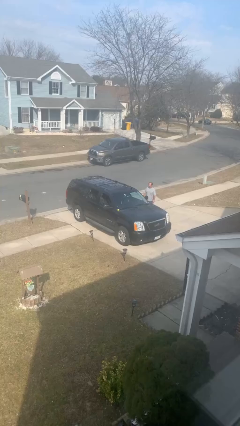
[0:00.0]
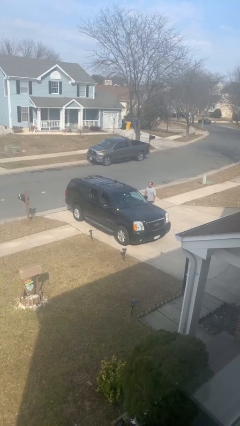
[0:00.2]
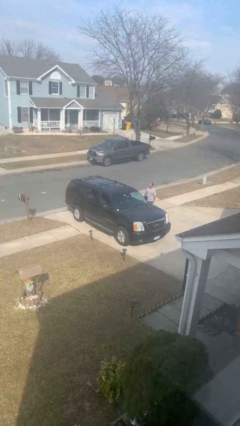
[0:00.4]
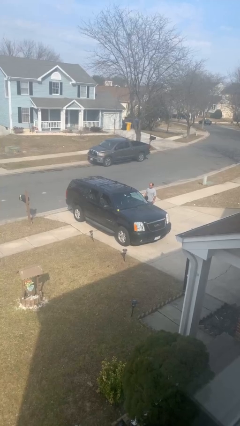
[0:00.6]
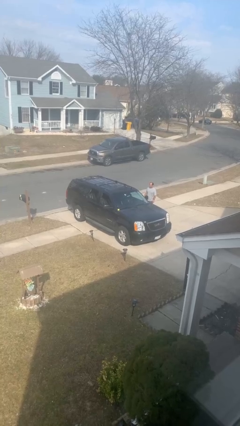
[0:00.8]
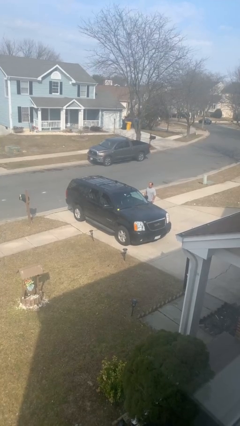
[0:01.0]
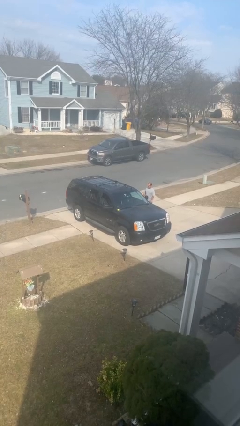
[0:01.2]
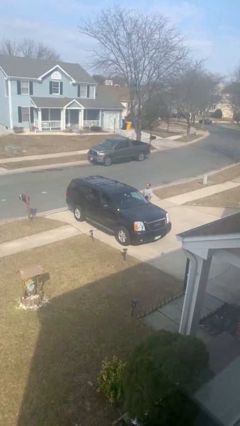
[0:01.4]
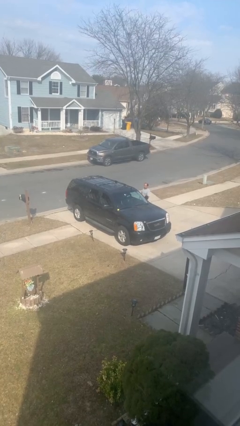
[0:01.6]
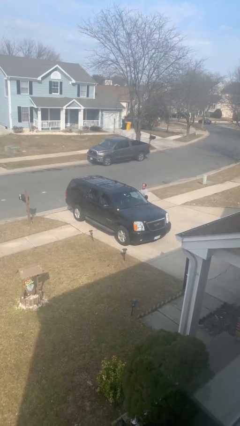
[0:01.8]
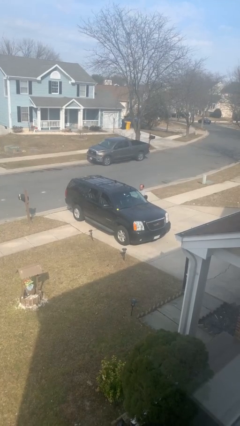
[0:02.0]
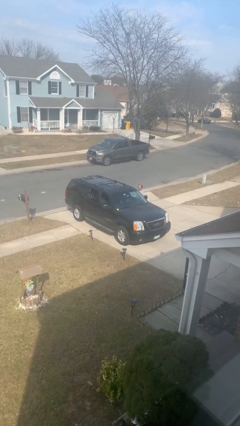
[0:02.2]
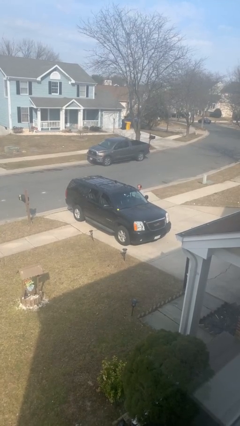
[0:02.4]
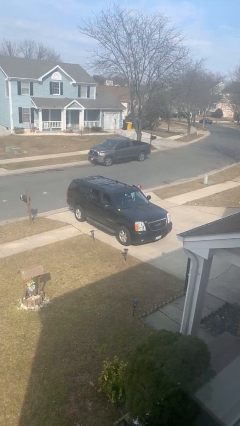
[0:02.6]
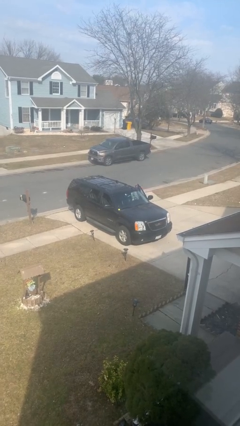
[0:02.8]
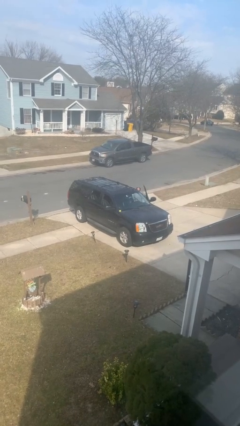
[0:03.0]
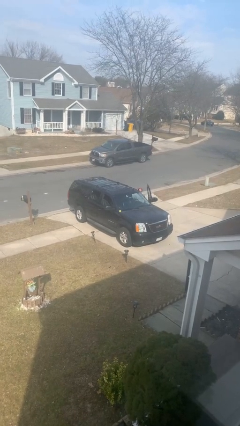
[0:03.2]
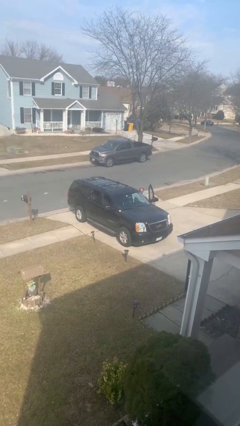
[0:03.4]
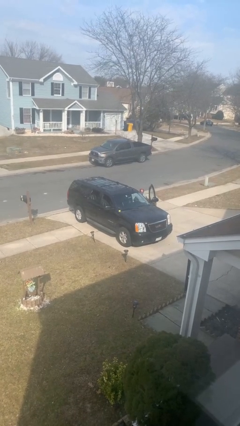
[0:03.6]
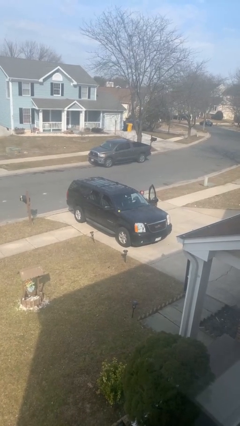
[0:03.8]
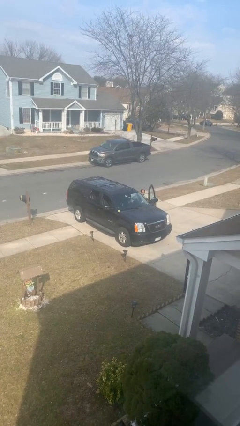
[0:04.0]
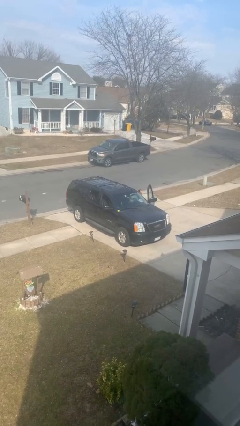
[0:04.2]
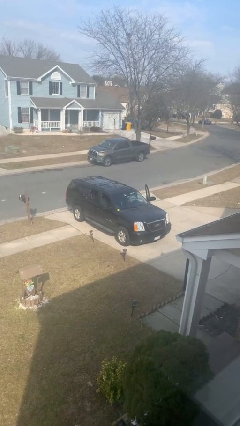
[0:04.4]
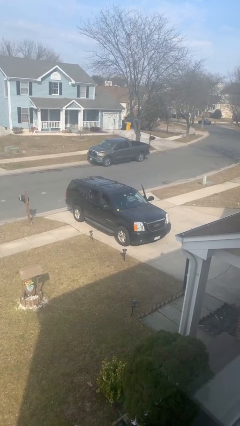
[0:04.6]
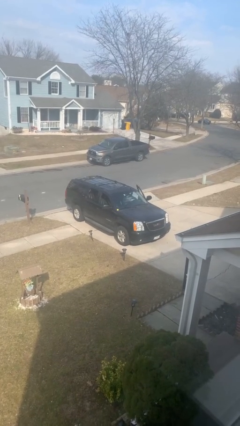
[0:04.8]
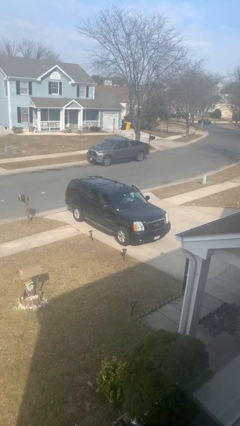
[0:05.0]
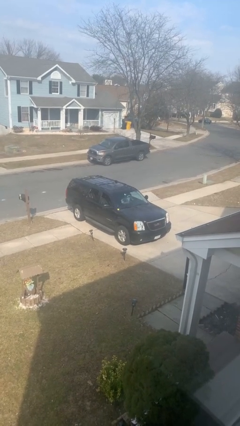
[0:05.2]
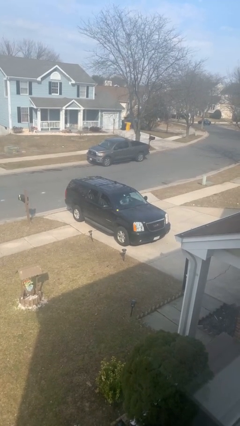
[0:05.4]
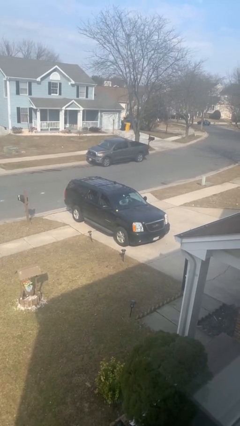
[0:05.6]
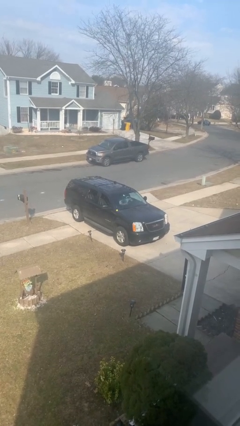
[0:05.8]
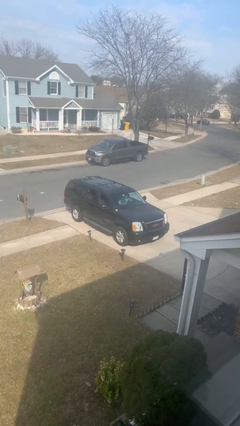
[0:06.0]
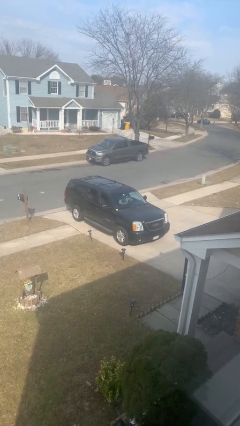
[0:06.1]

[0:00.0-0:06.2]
car picks up person

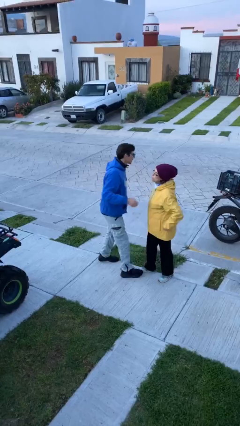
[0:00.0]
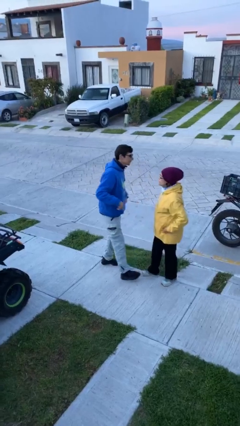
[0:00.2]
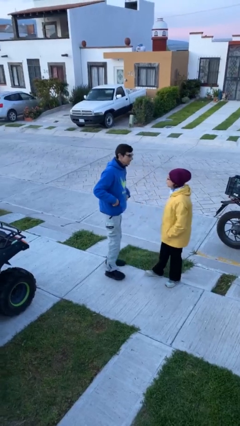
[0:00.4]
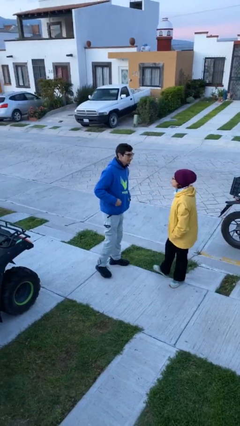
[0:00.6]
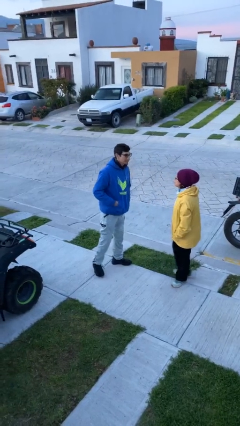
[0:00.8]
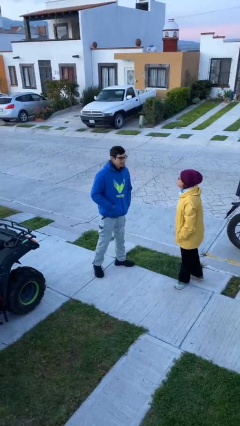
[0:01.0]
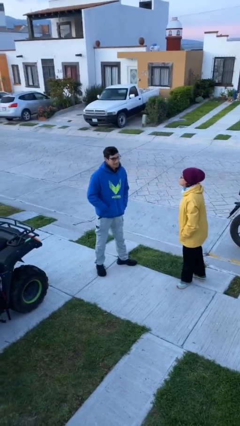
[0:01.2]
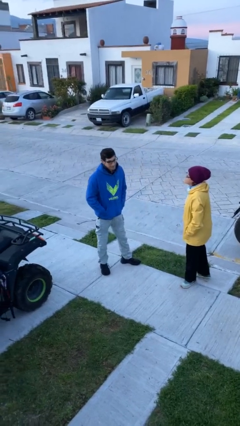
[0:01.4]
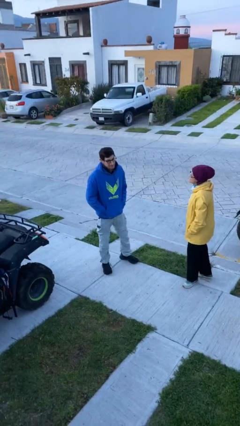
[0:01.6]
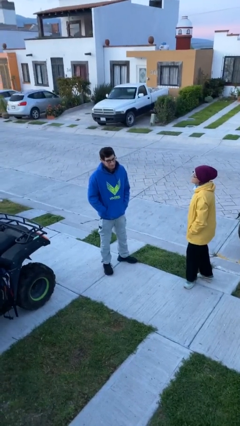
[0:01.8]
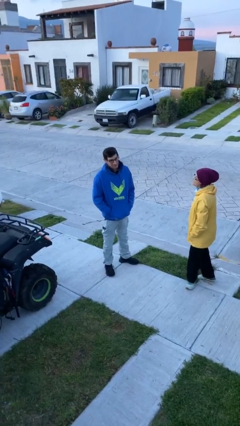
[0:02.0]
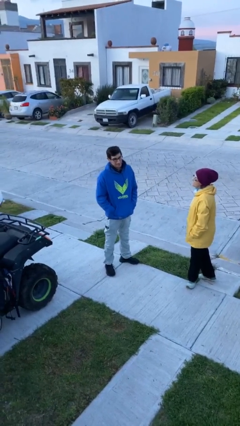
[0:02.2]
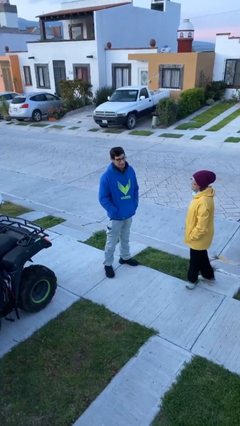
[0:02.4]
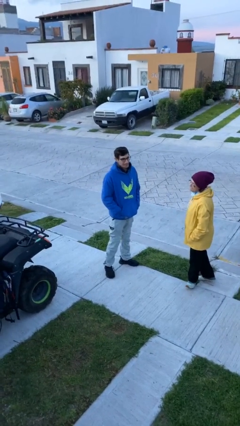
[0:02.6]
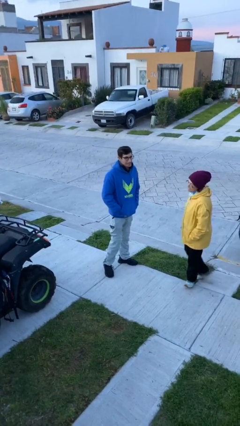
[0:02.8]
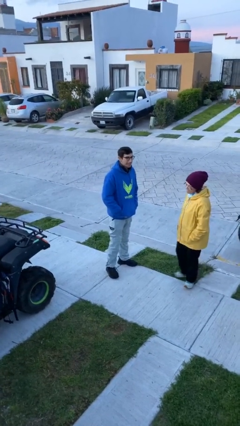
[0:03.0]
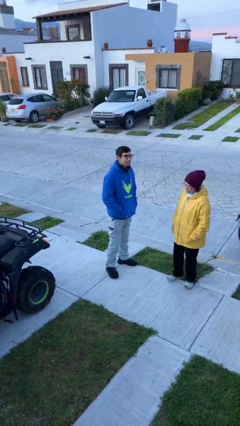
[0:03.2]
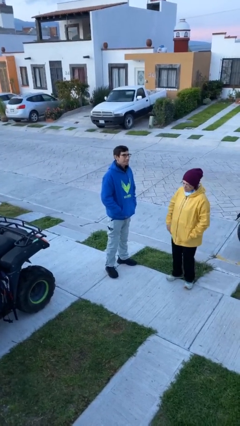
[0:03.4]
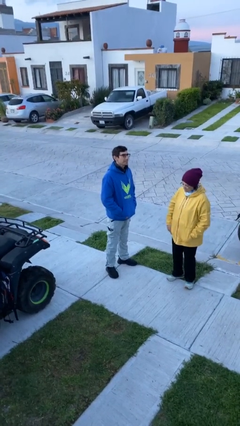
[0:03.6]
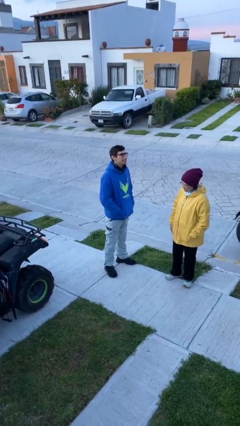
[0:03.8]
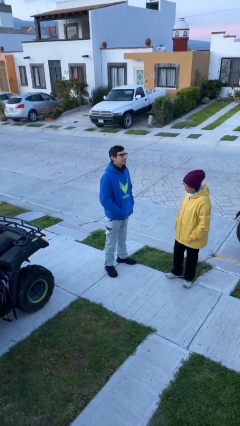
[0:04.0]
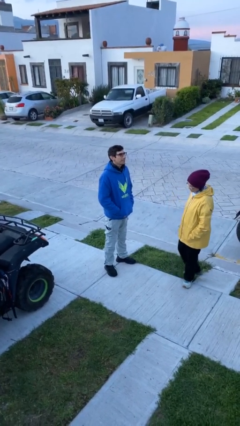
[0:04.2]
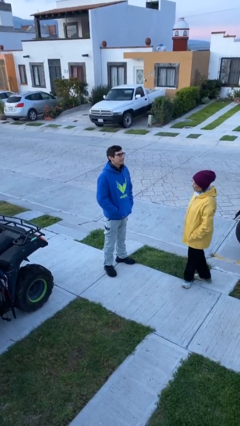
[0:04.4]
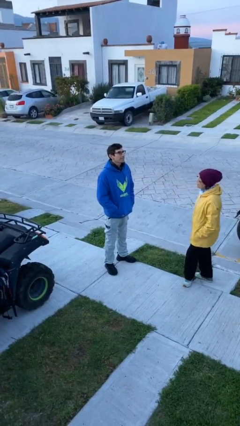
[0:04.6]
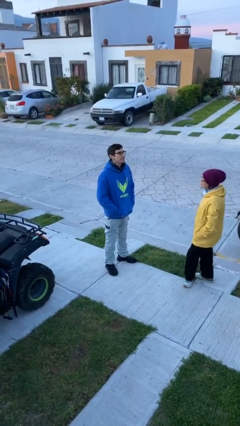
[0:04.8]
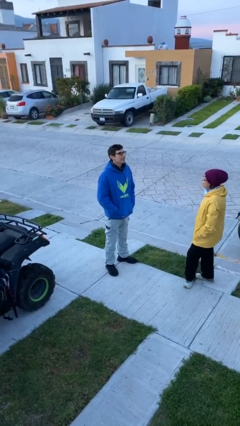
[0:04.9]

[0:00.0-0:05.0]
person talks to person

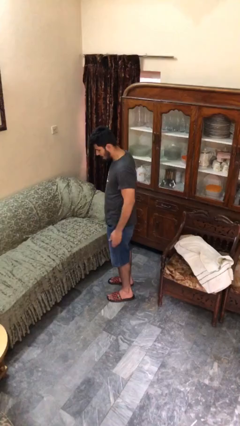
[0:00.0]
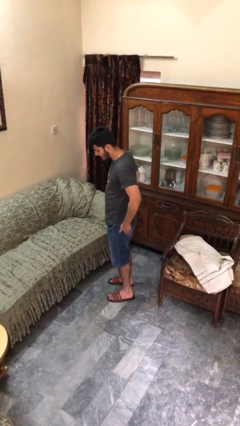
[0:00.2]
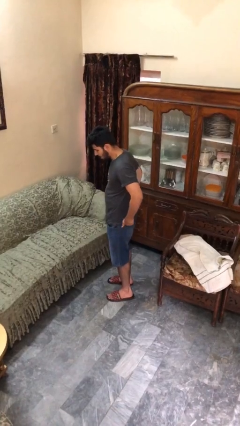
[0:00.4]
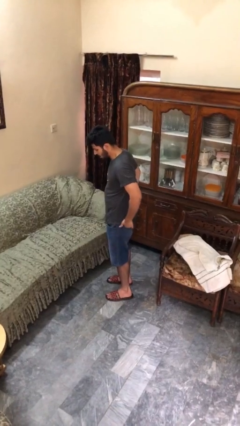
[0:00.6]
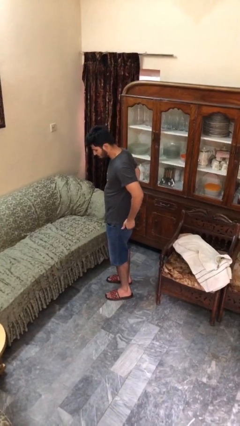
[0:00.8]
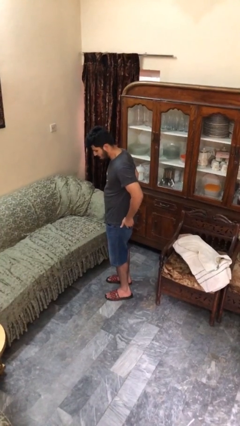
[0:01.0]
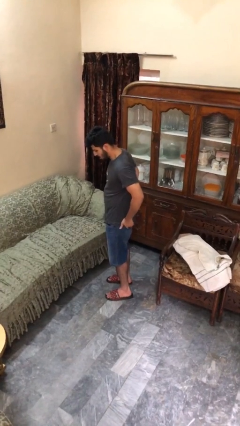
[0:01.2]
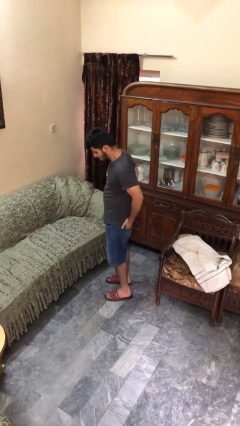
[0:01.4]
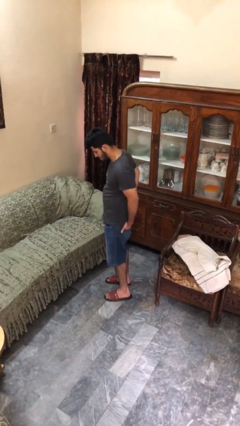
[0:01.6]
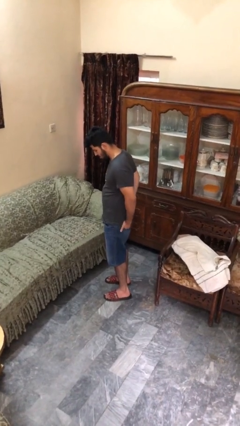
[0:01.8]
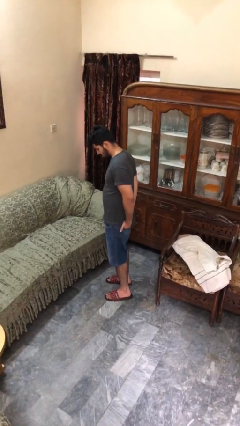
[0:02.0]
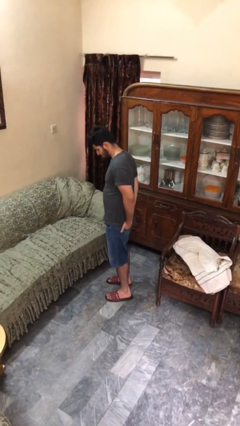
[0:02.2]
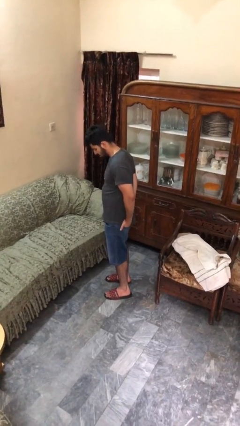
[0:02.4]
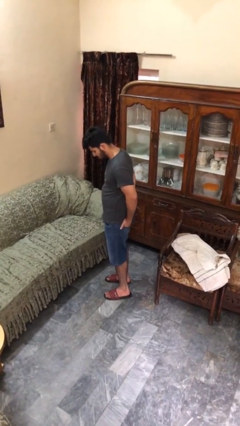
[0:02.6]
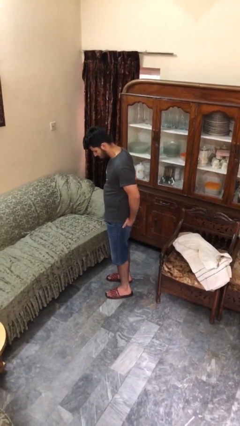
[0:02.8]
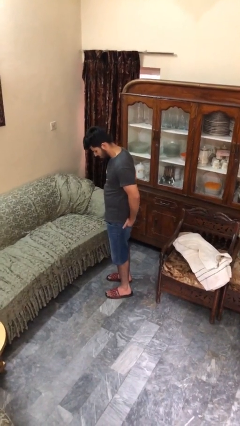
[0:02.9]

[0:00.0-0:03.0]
person puts hands in back pockets

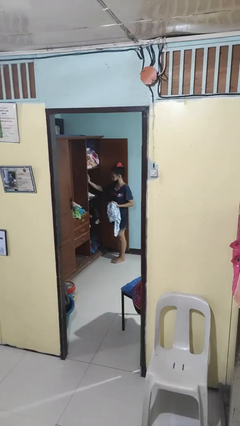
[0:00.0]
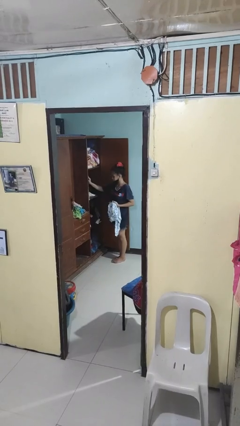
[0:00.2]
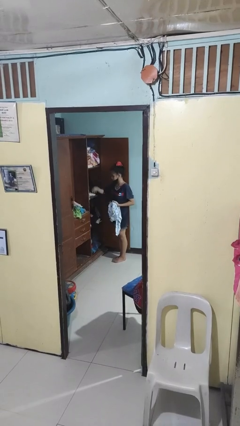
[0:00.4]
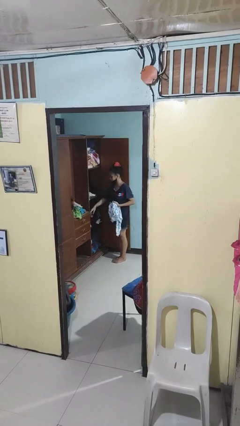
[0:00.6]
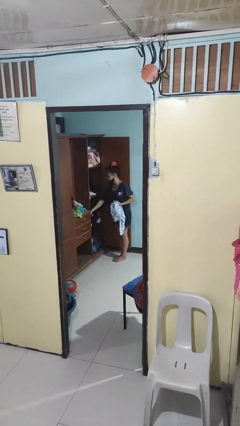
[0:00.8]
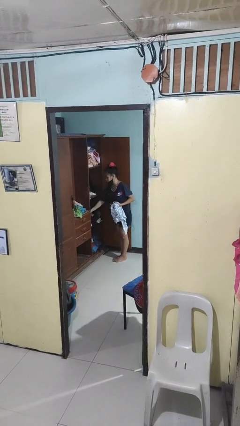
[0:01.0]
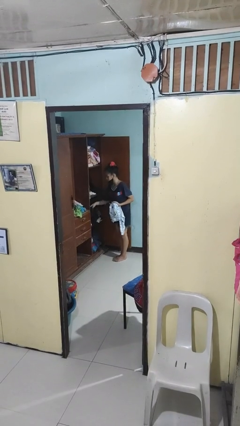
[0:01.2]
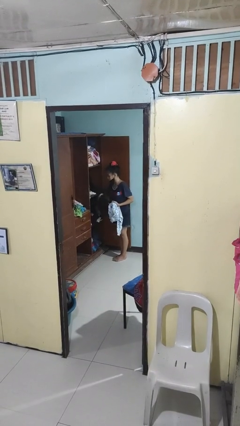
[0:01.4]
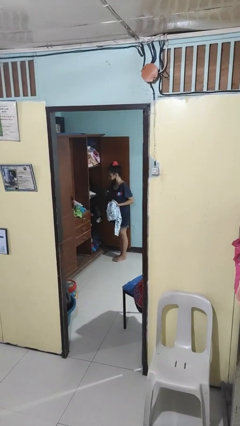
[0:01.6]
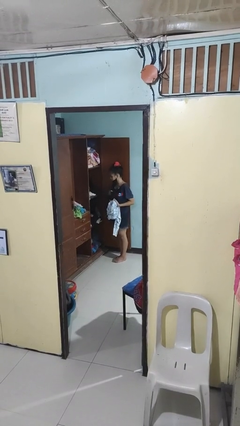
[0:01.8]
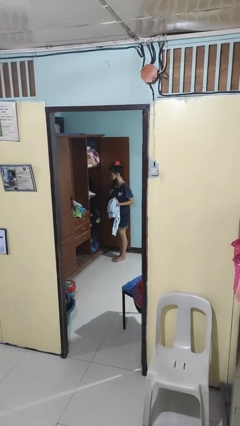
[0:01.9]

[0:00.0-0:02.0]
person takes clothes from dresser

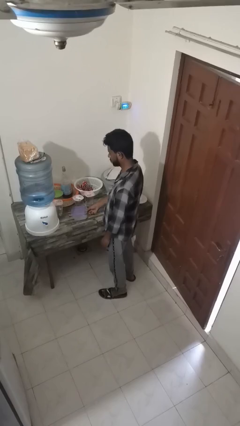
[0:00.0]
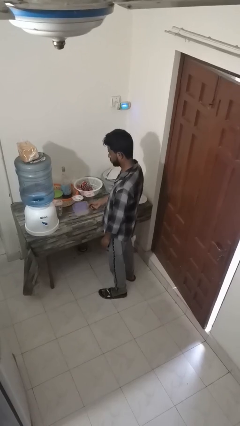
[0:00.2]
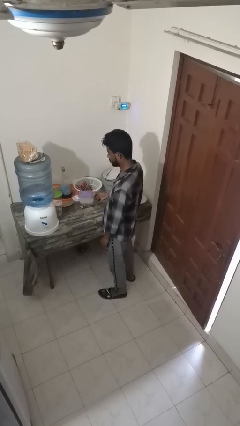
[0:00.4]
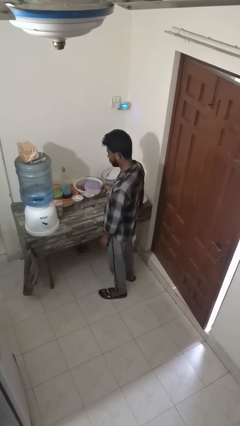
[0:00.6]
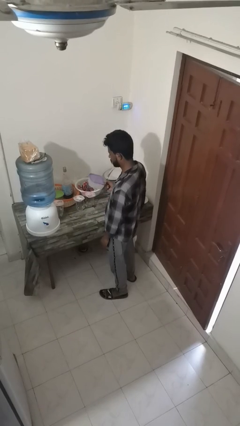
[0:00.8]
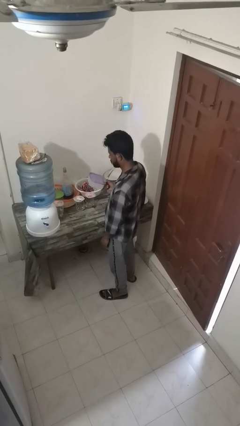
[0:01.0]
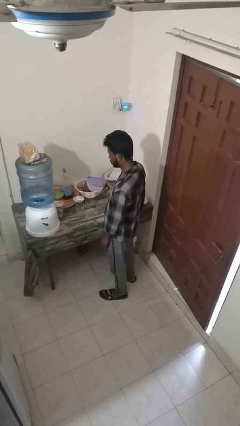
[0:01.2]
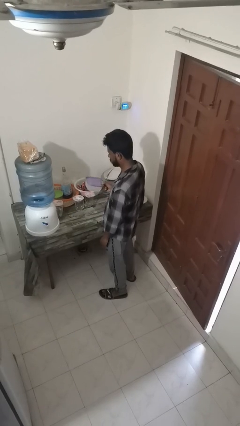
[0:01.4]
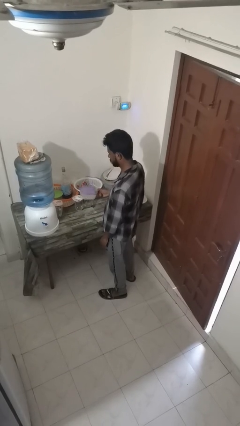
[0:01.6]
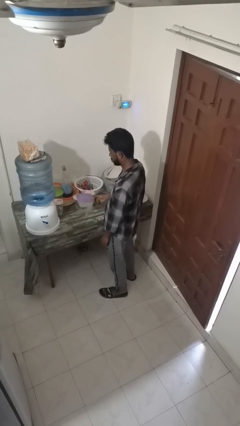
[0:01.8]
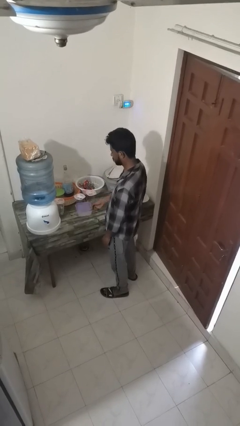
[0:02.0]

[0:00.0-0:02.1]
person picks up object from countertop
